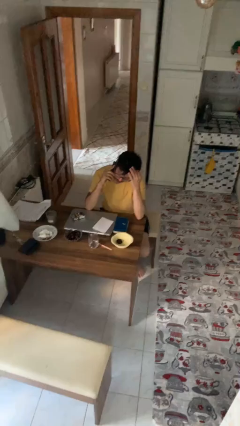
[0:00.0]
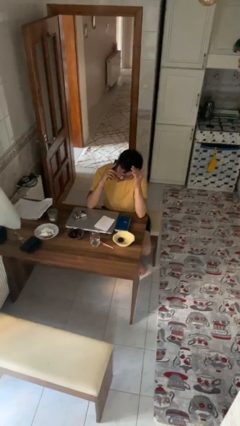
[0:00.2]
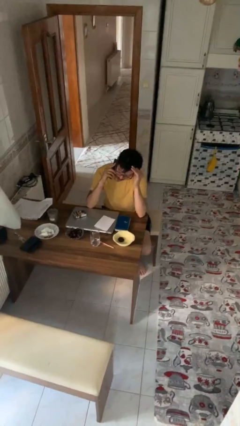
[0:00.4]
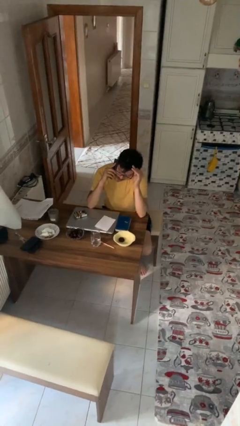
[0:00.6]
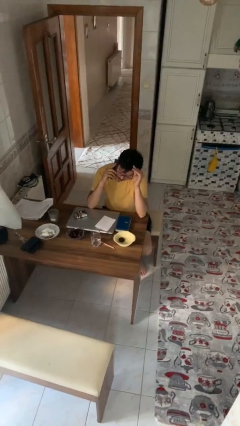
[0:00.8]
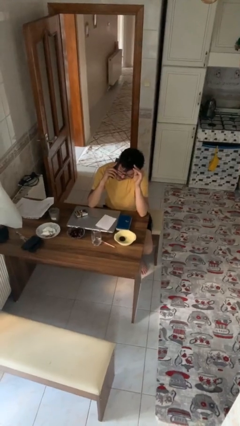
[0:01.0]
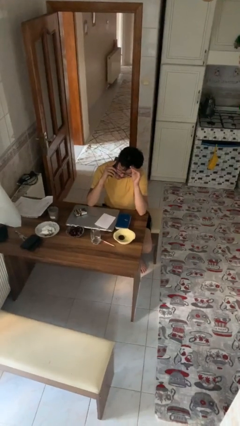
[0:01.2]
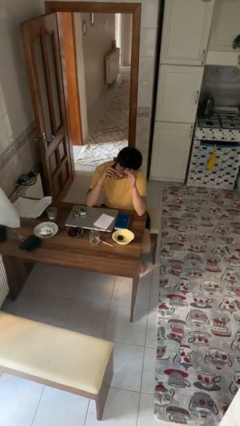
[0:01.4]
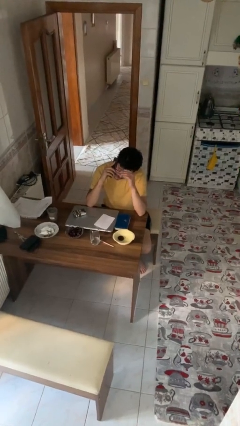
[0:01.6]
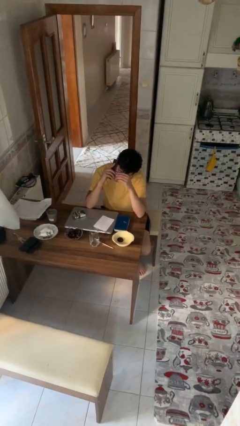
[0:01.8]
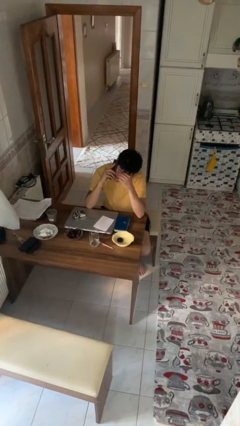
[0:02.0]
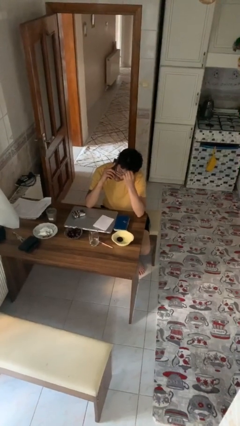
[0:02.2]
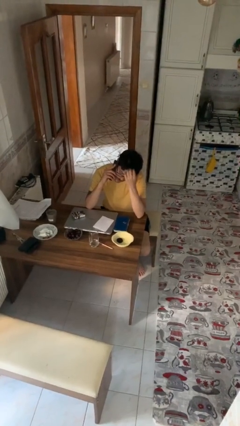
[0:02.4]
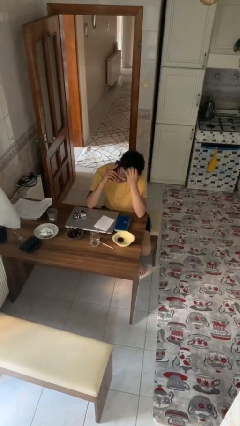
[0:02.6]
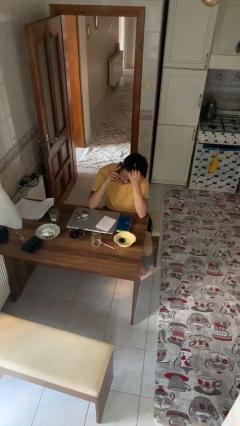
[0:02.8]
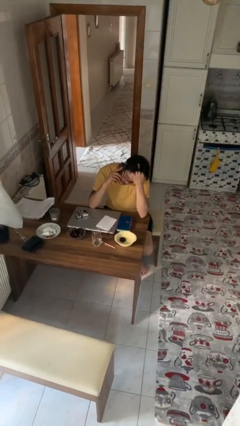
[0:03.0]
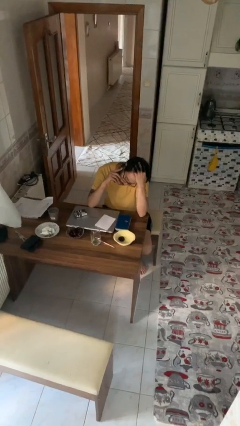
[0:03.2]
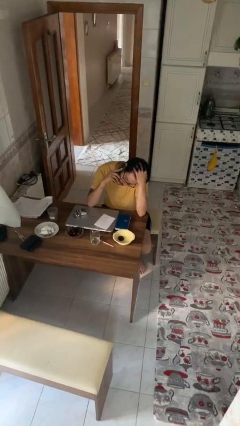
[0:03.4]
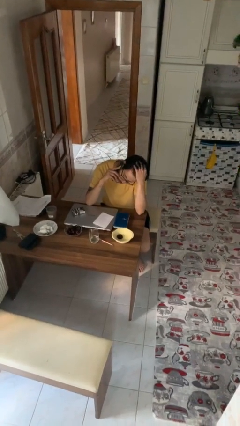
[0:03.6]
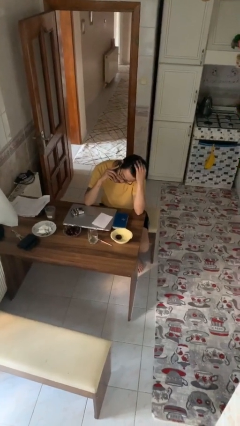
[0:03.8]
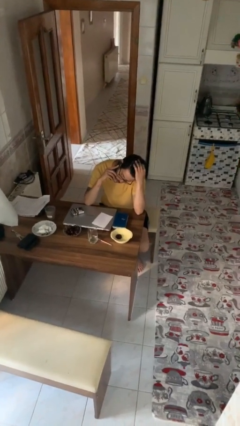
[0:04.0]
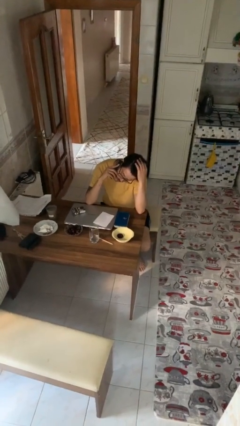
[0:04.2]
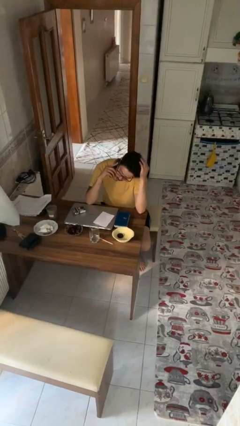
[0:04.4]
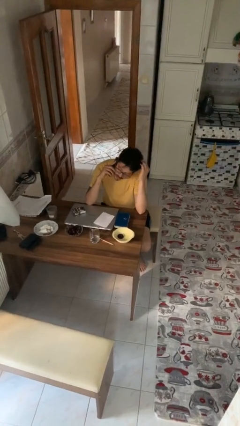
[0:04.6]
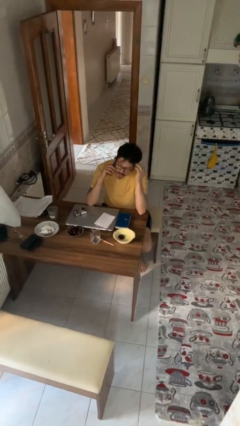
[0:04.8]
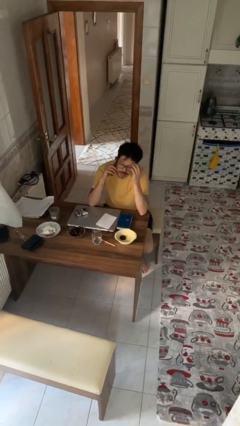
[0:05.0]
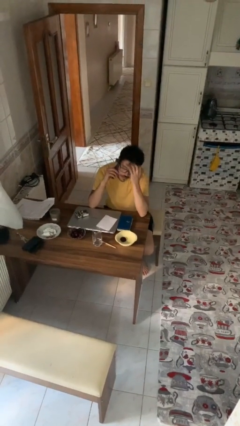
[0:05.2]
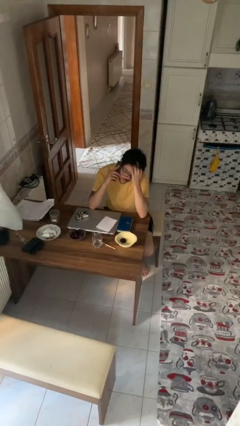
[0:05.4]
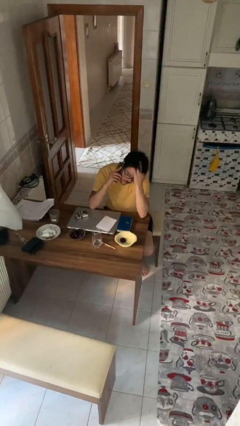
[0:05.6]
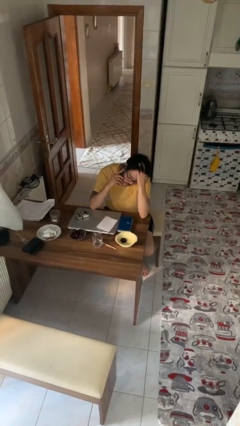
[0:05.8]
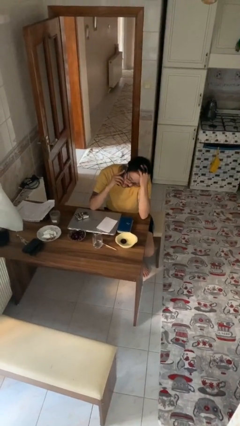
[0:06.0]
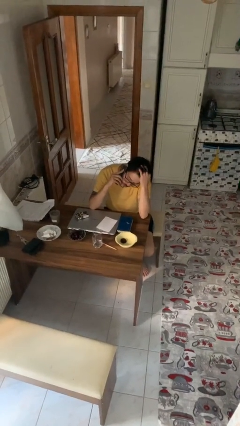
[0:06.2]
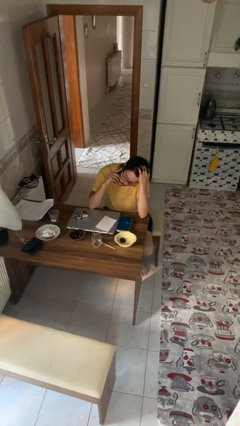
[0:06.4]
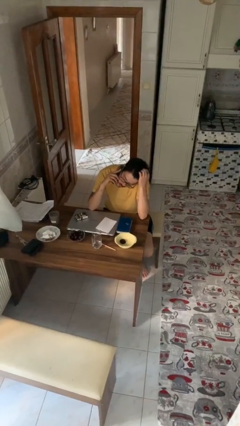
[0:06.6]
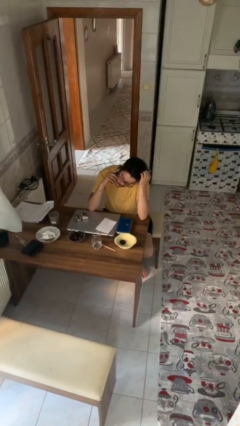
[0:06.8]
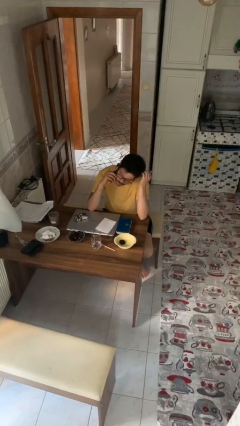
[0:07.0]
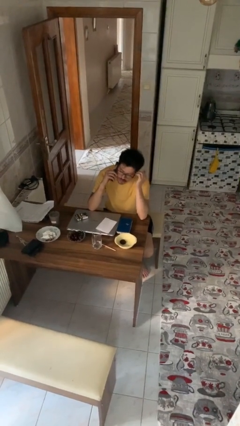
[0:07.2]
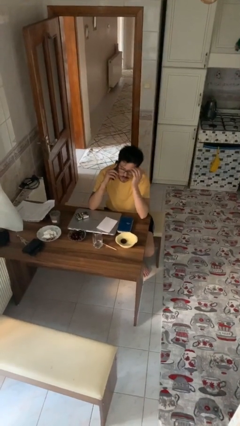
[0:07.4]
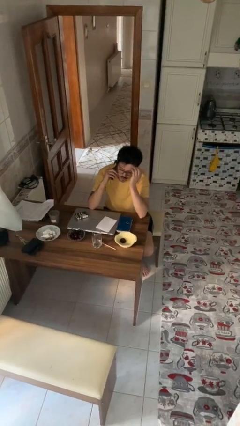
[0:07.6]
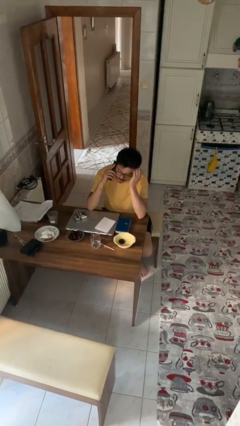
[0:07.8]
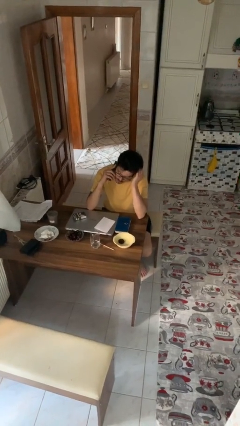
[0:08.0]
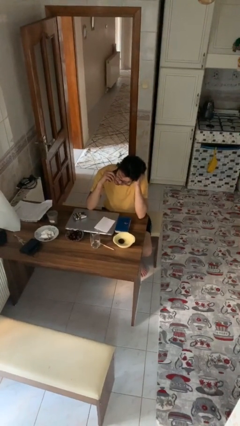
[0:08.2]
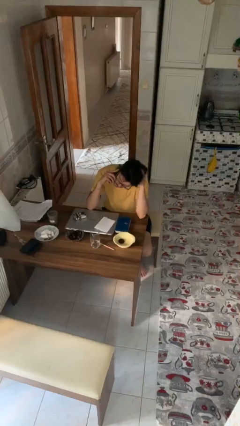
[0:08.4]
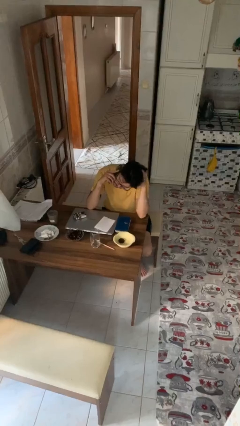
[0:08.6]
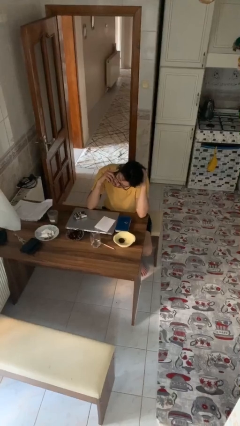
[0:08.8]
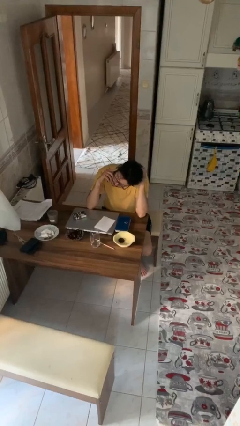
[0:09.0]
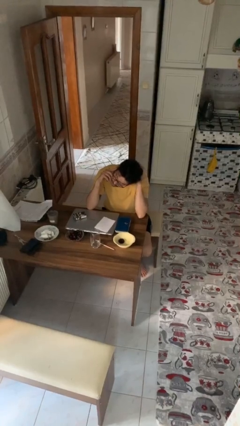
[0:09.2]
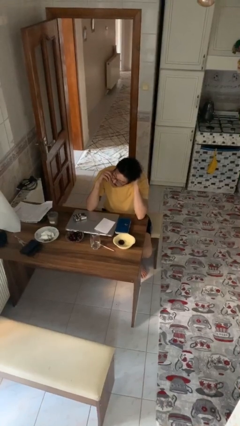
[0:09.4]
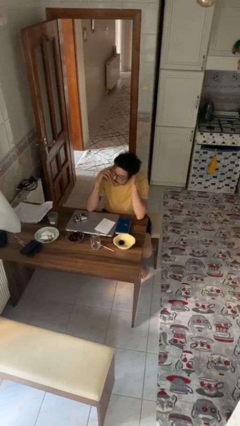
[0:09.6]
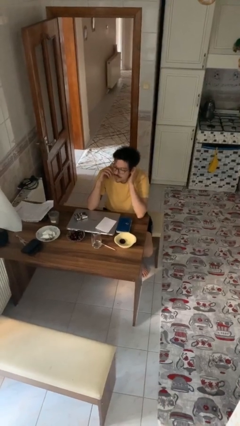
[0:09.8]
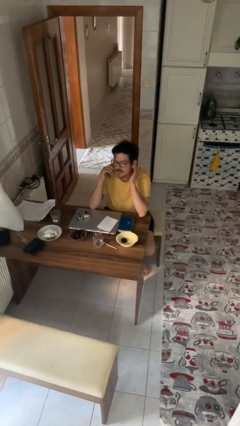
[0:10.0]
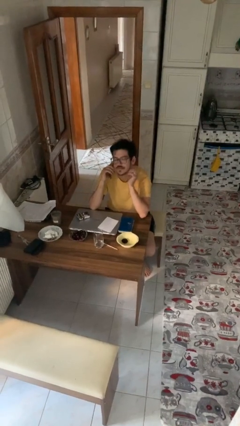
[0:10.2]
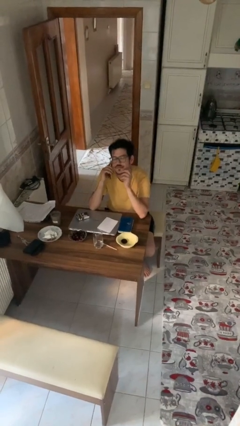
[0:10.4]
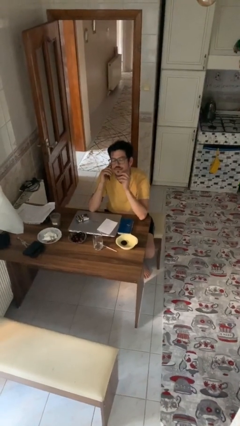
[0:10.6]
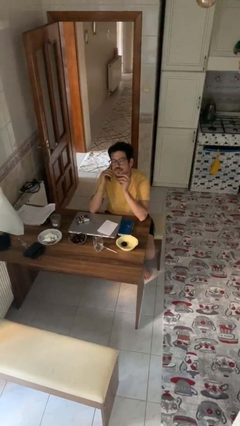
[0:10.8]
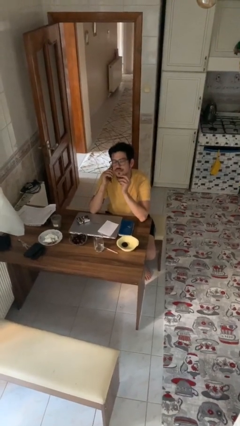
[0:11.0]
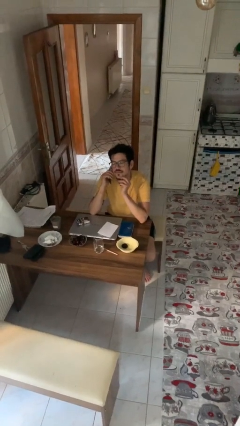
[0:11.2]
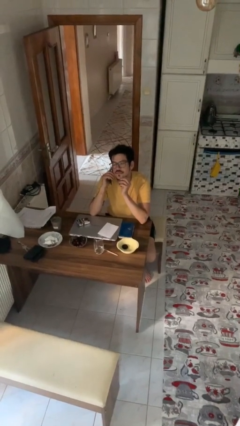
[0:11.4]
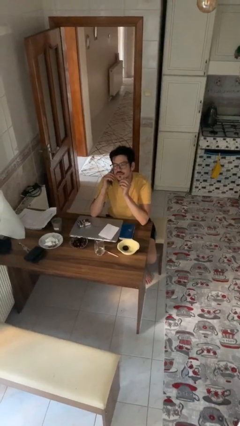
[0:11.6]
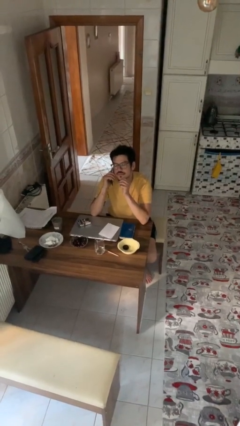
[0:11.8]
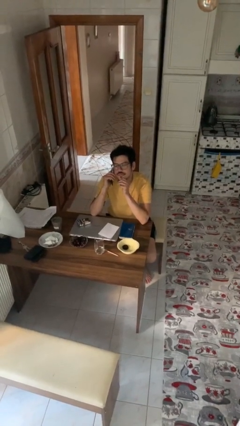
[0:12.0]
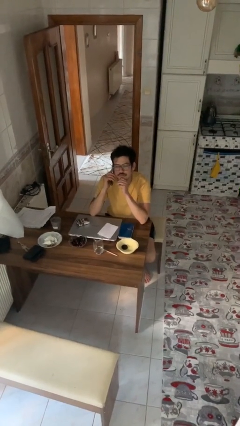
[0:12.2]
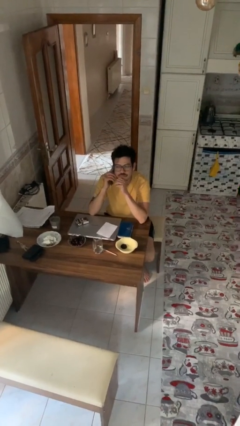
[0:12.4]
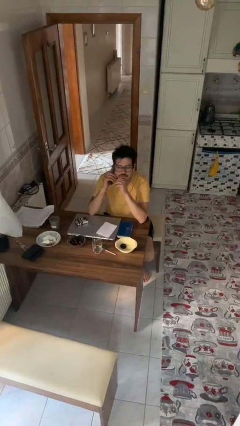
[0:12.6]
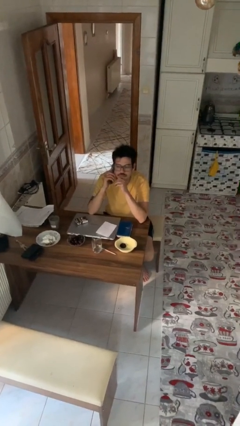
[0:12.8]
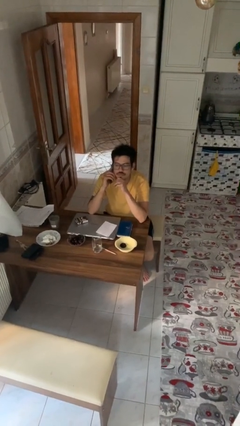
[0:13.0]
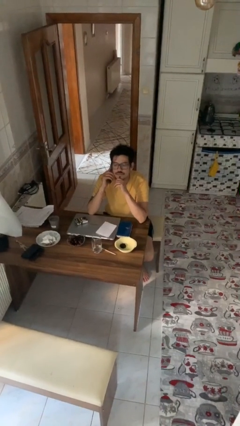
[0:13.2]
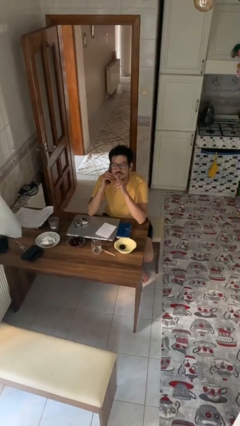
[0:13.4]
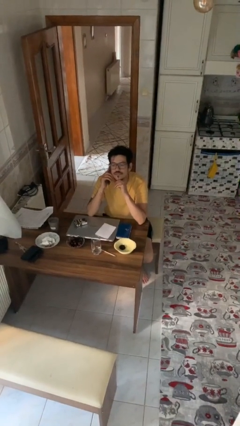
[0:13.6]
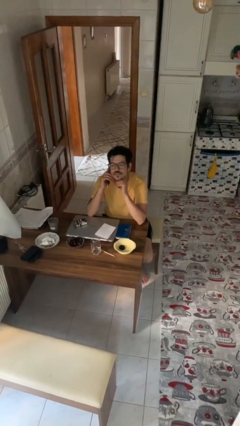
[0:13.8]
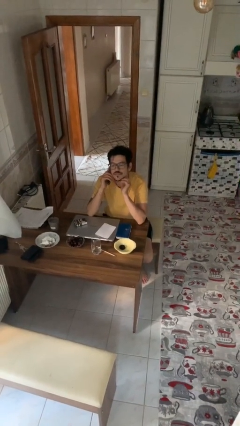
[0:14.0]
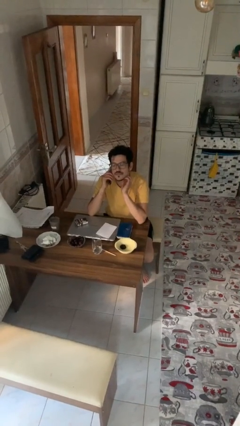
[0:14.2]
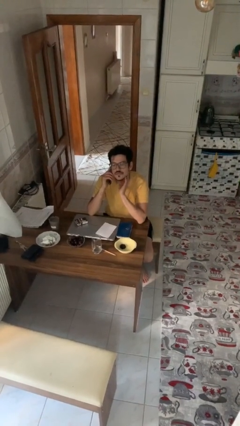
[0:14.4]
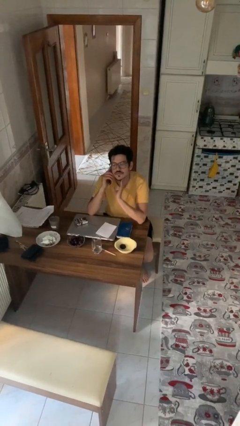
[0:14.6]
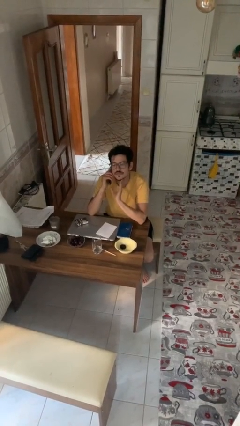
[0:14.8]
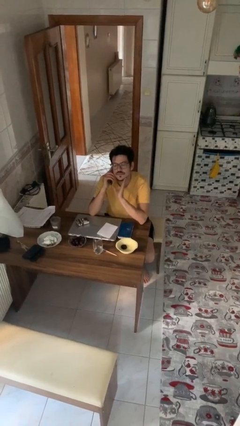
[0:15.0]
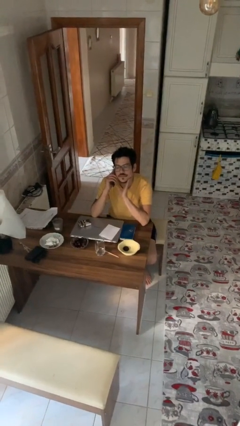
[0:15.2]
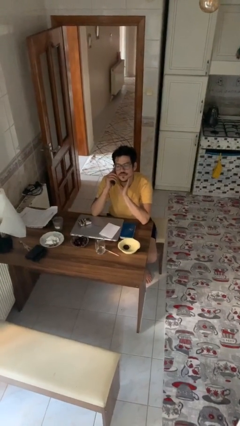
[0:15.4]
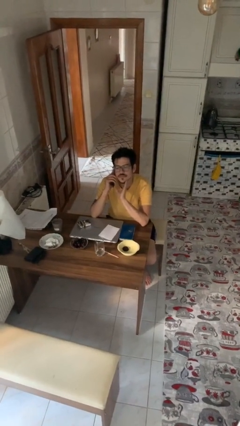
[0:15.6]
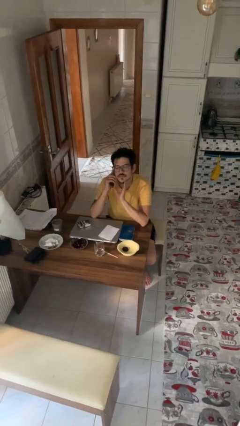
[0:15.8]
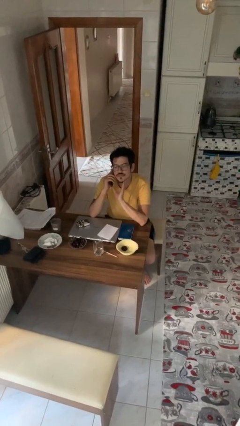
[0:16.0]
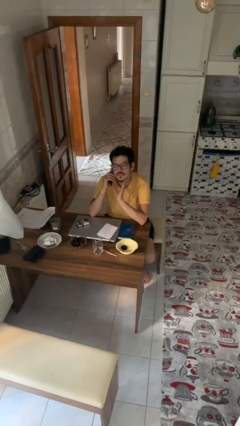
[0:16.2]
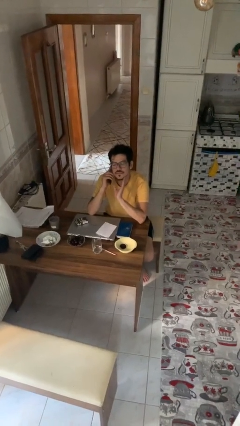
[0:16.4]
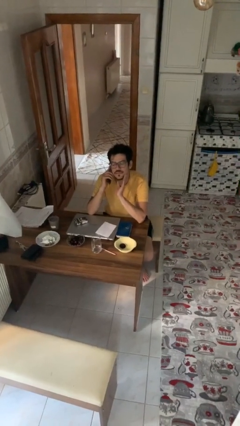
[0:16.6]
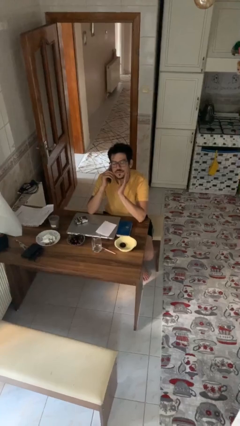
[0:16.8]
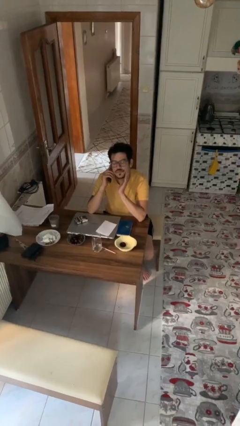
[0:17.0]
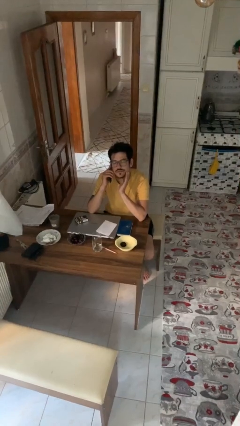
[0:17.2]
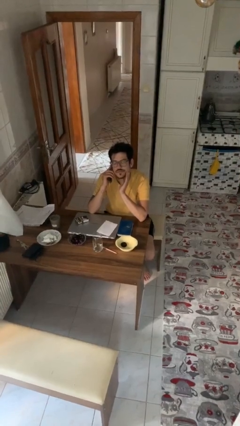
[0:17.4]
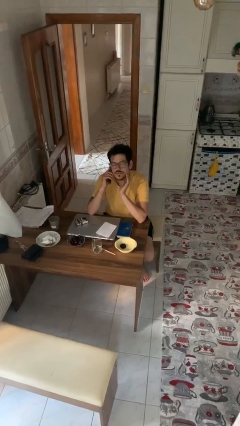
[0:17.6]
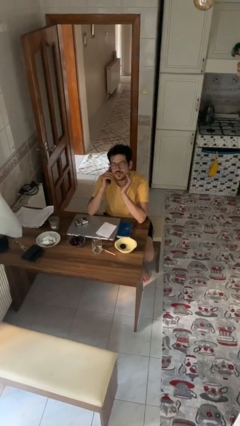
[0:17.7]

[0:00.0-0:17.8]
person talks on phone

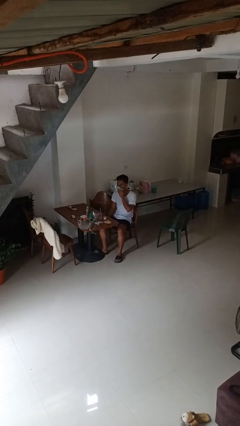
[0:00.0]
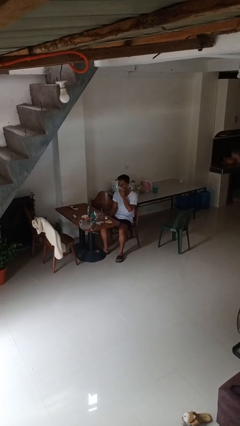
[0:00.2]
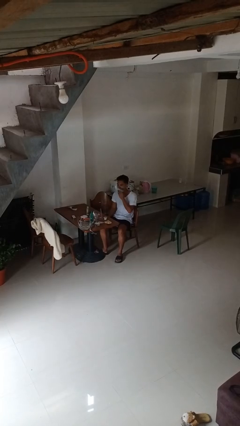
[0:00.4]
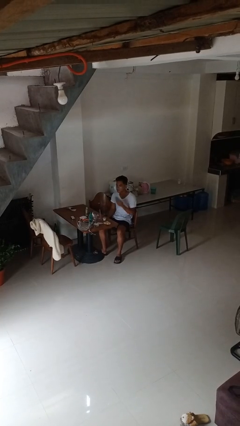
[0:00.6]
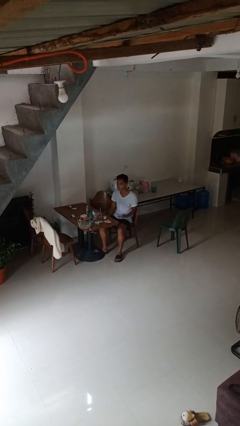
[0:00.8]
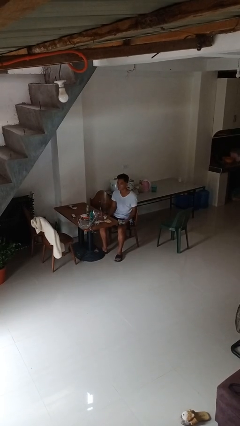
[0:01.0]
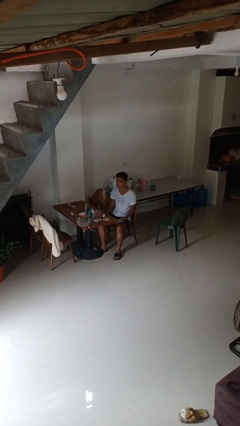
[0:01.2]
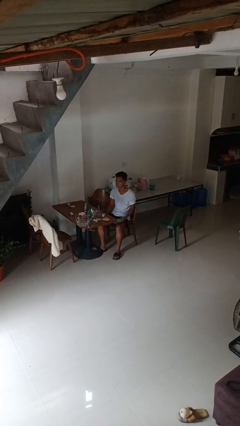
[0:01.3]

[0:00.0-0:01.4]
person wipes mouth with napkin
